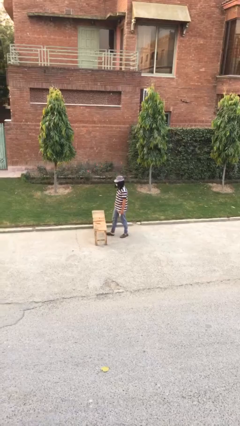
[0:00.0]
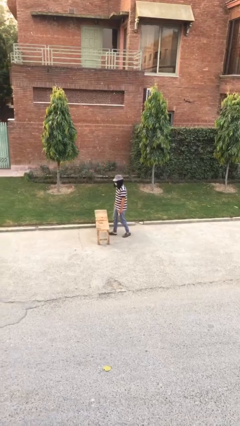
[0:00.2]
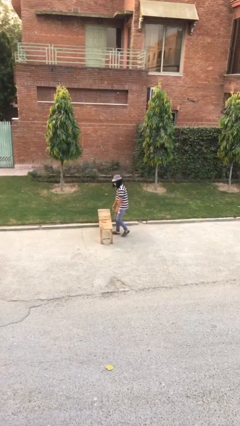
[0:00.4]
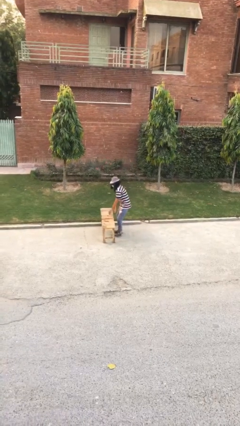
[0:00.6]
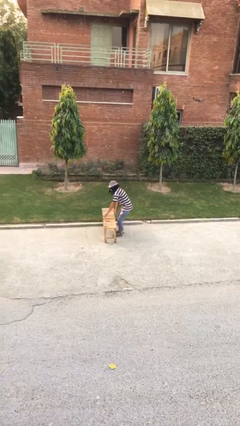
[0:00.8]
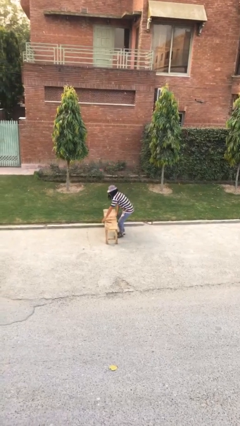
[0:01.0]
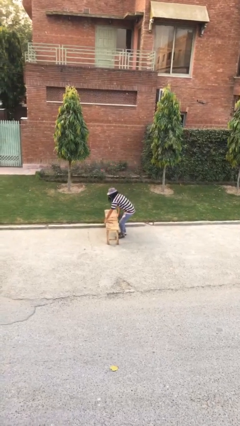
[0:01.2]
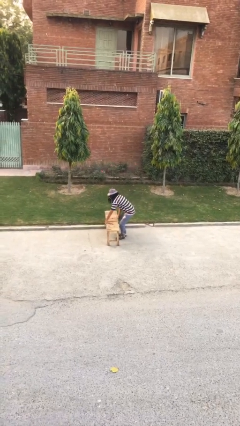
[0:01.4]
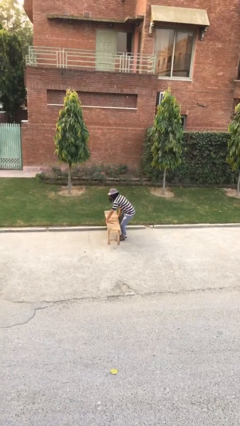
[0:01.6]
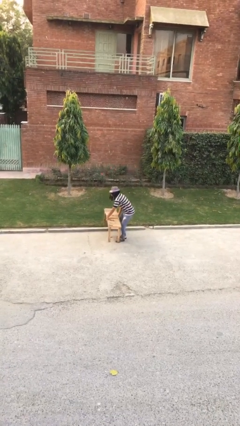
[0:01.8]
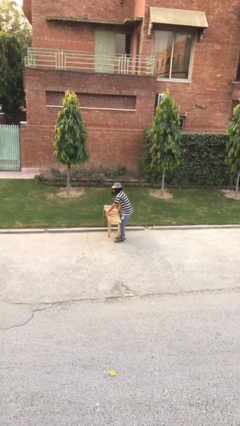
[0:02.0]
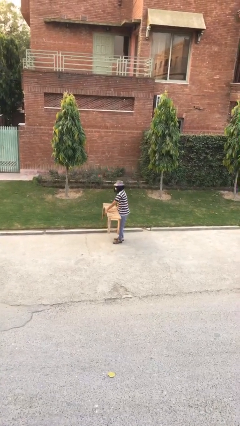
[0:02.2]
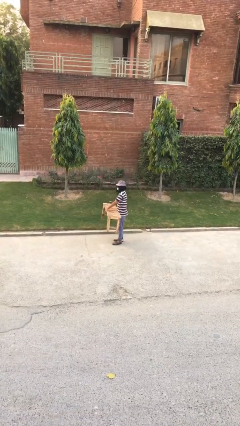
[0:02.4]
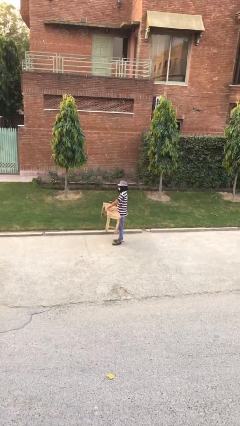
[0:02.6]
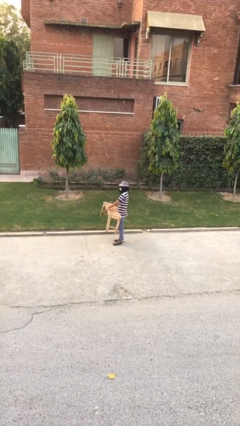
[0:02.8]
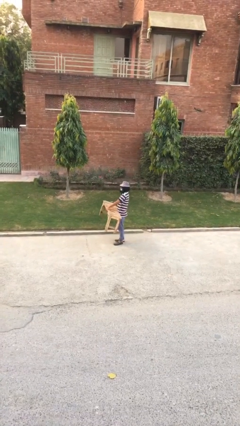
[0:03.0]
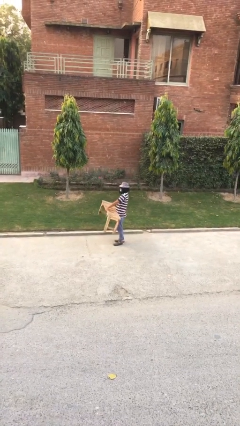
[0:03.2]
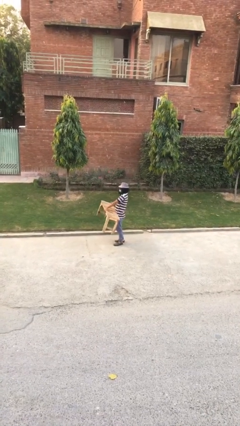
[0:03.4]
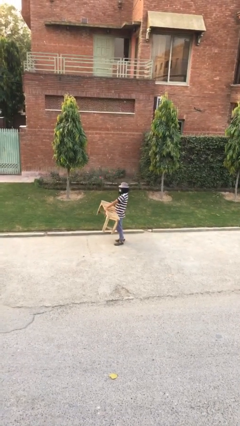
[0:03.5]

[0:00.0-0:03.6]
person picks up object from floor

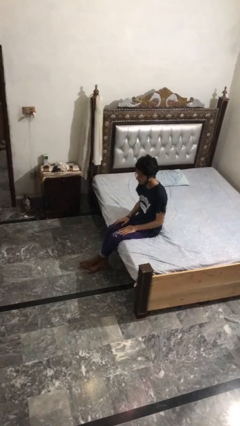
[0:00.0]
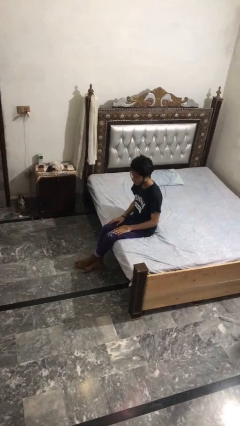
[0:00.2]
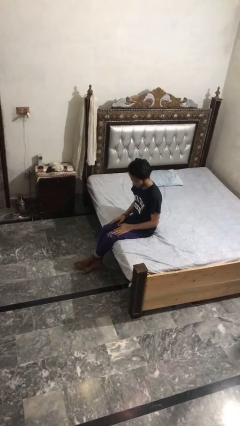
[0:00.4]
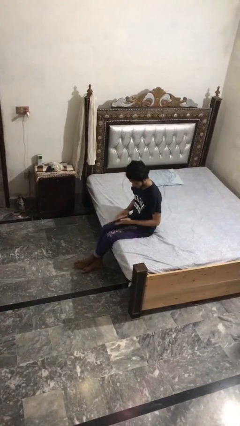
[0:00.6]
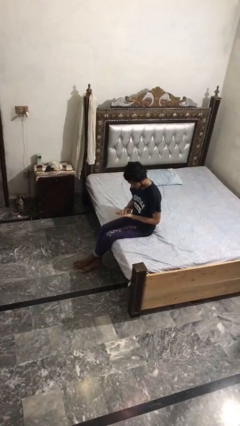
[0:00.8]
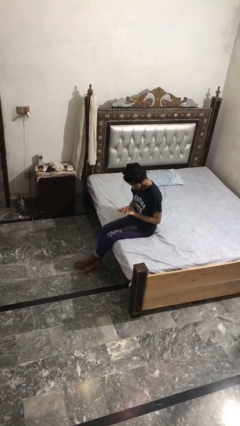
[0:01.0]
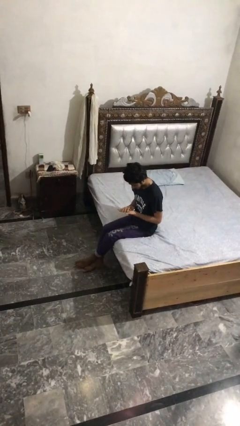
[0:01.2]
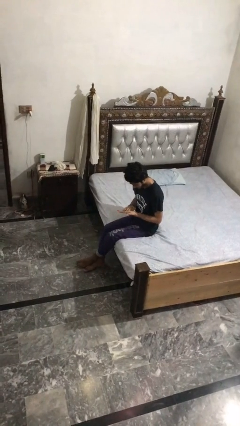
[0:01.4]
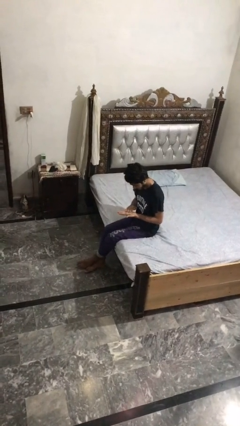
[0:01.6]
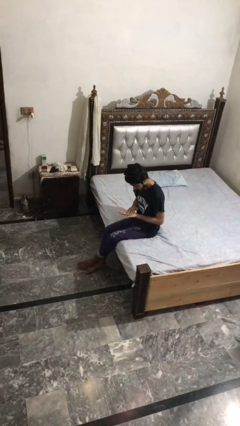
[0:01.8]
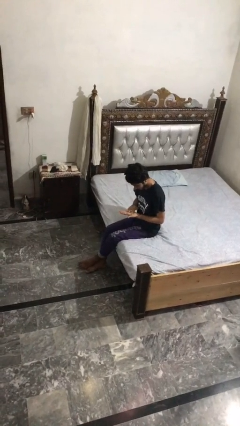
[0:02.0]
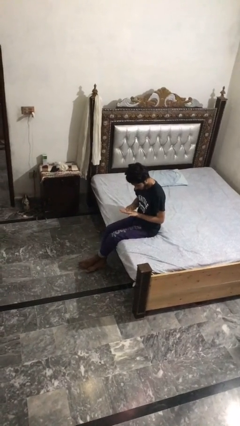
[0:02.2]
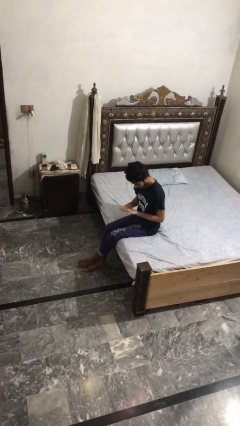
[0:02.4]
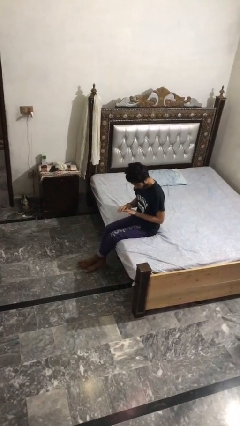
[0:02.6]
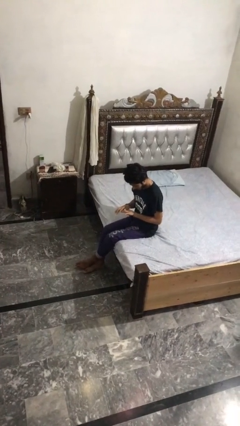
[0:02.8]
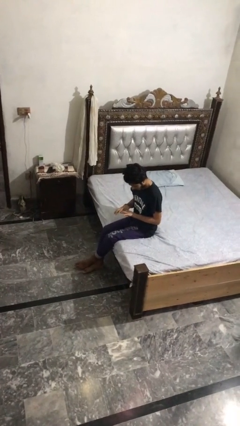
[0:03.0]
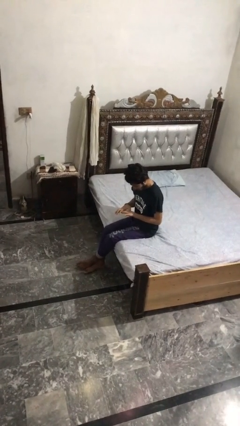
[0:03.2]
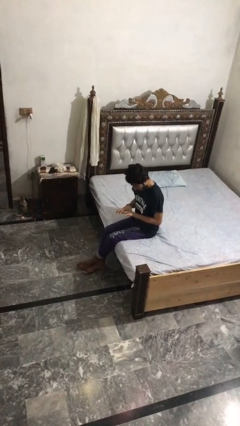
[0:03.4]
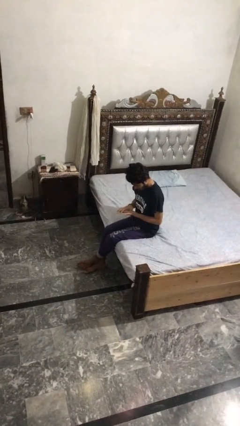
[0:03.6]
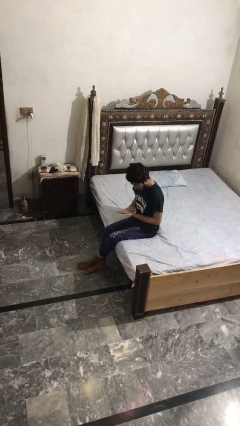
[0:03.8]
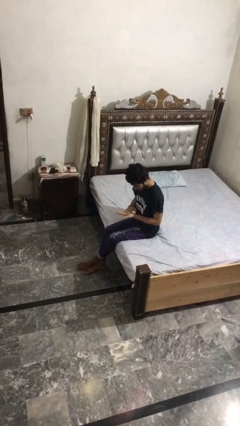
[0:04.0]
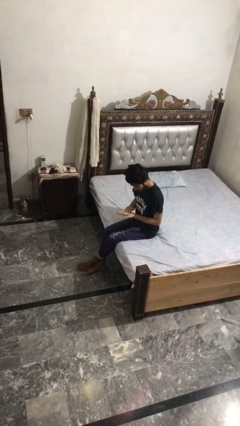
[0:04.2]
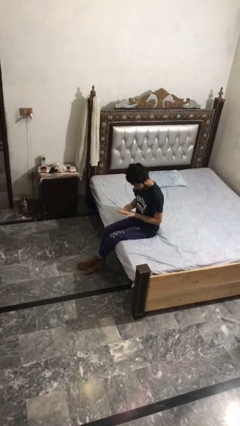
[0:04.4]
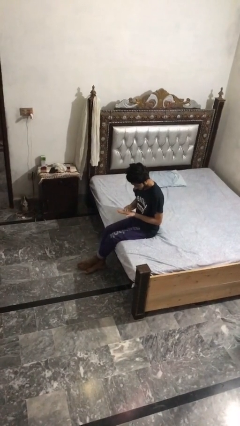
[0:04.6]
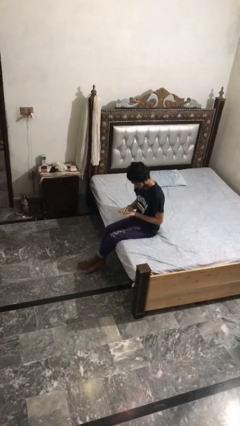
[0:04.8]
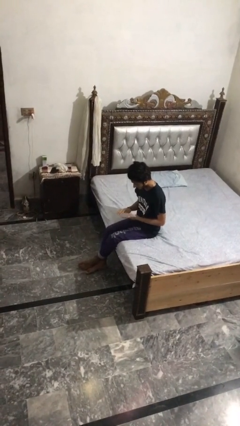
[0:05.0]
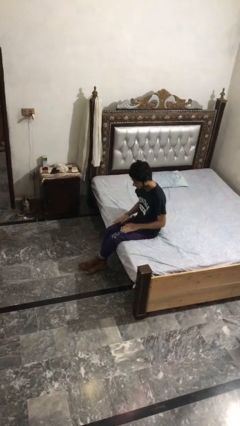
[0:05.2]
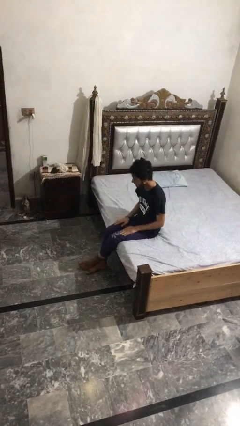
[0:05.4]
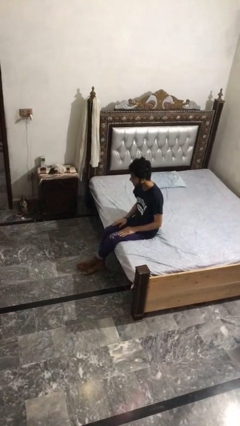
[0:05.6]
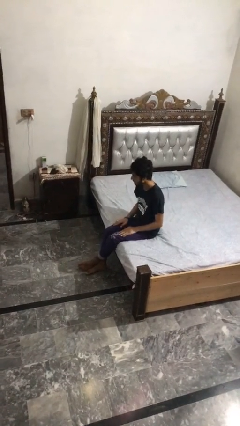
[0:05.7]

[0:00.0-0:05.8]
person looks at hands in lap

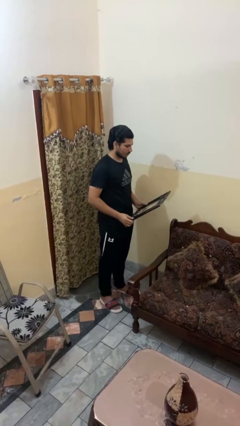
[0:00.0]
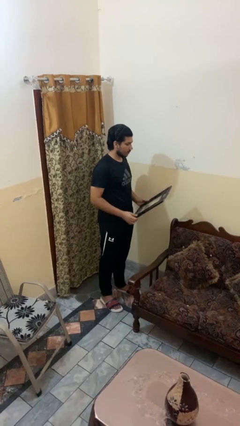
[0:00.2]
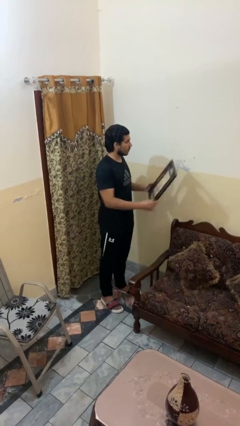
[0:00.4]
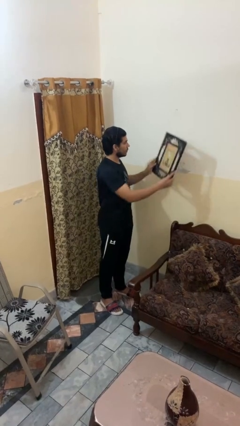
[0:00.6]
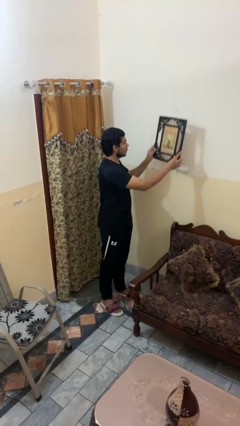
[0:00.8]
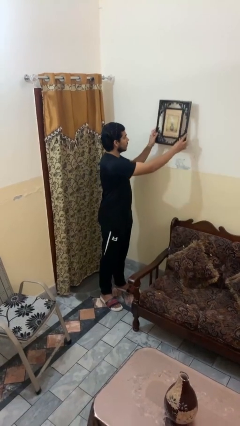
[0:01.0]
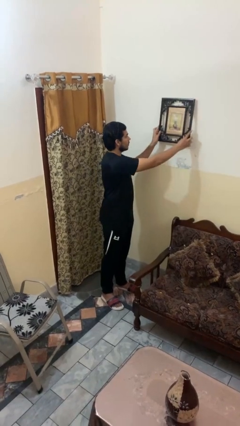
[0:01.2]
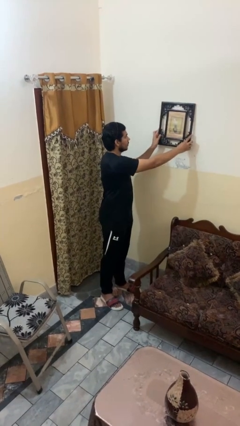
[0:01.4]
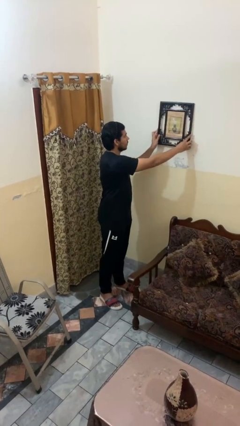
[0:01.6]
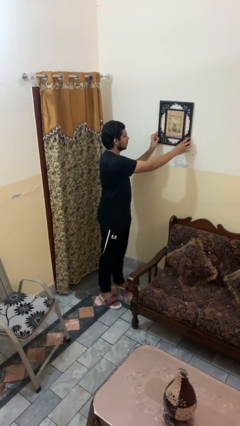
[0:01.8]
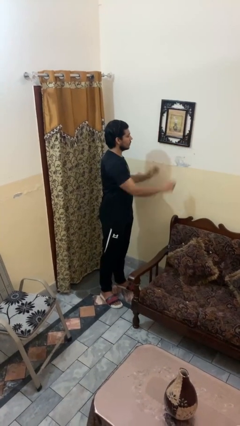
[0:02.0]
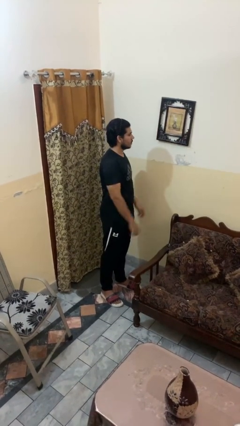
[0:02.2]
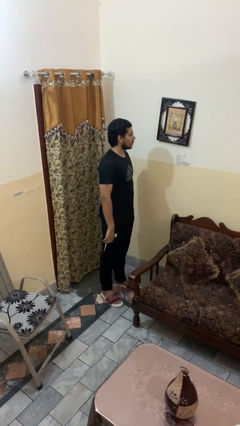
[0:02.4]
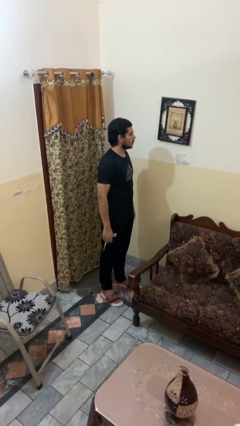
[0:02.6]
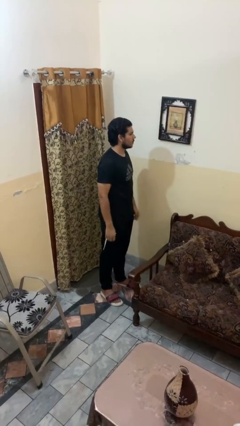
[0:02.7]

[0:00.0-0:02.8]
person puts up picture frame

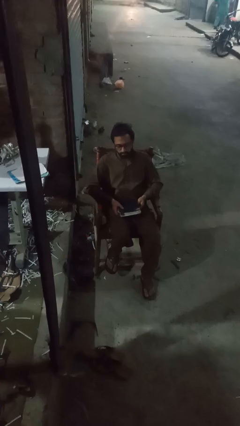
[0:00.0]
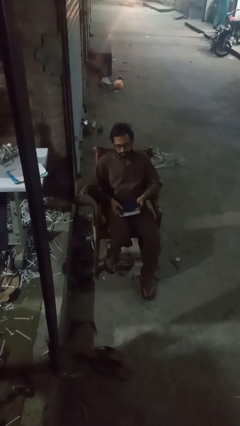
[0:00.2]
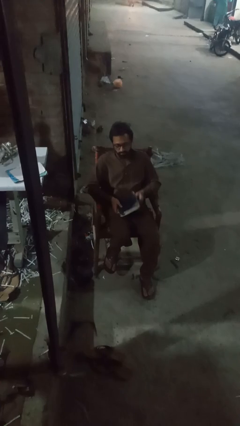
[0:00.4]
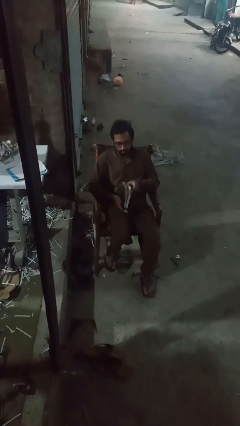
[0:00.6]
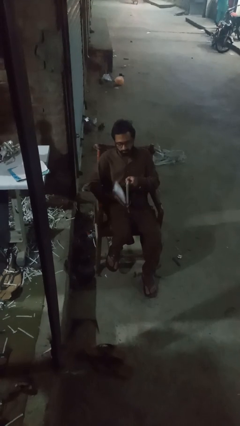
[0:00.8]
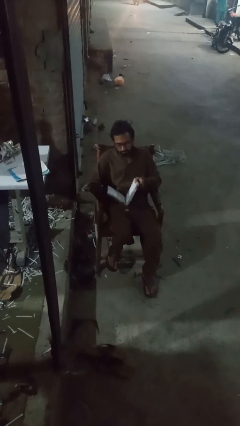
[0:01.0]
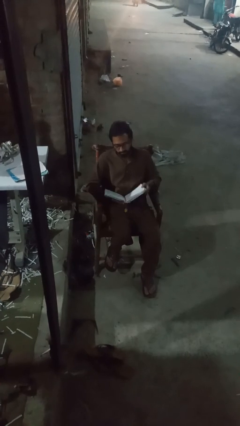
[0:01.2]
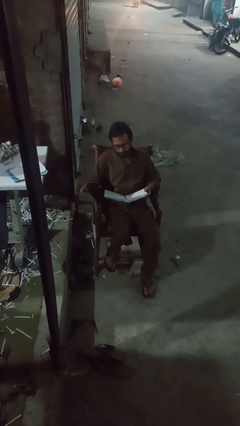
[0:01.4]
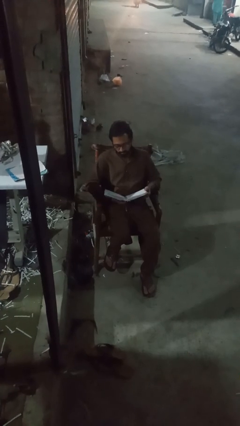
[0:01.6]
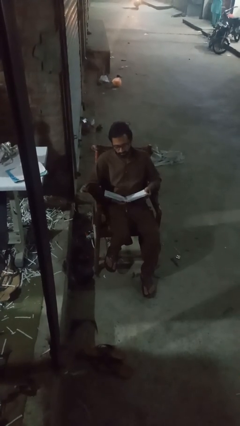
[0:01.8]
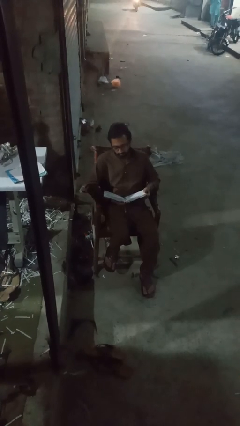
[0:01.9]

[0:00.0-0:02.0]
person reads book

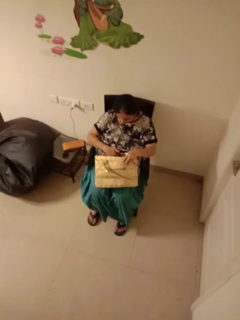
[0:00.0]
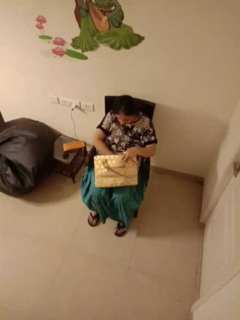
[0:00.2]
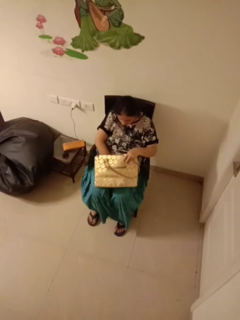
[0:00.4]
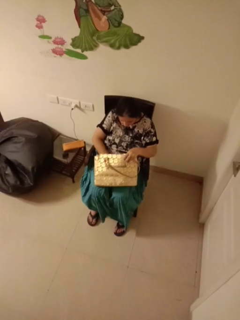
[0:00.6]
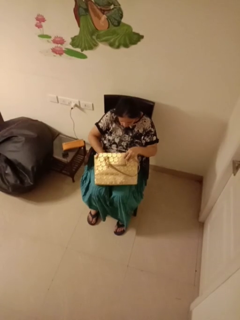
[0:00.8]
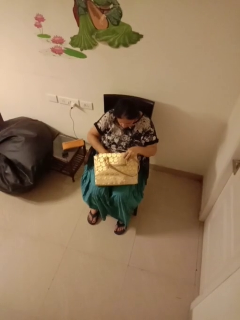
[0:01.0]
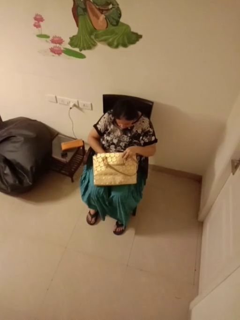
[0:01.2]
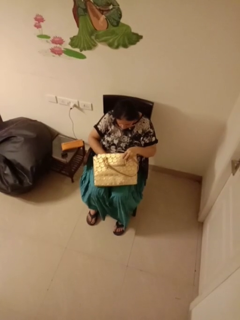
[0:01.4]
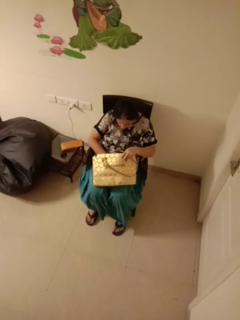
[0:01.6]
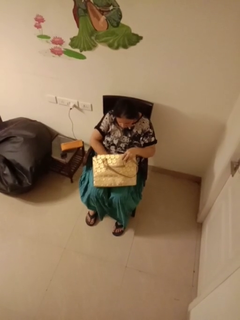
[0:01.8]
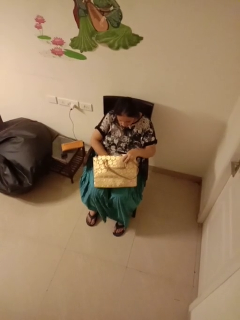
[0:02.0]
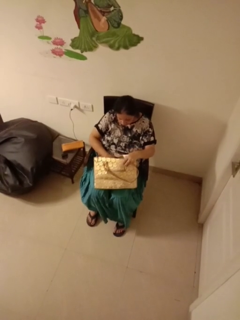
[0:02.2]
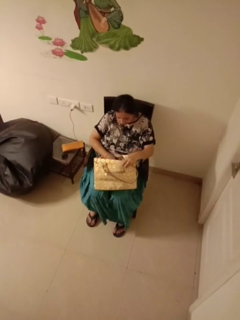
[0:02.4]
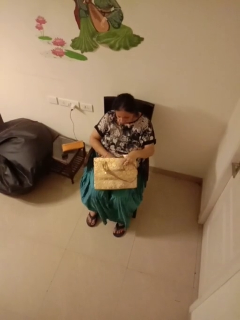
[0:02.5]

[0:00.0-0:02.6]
person searches in purse

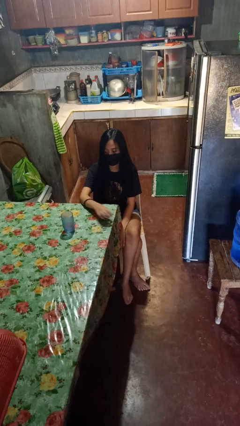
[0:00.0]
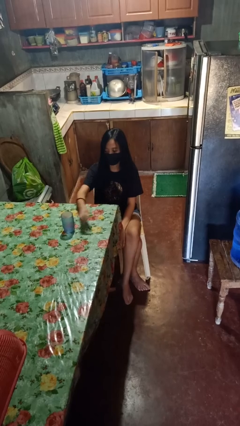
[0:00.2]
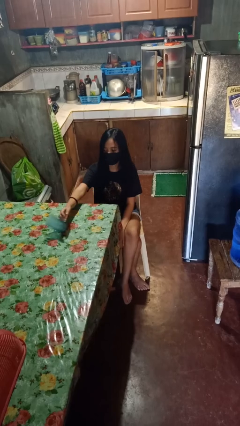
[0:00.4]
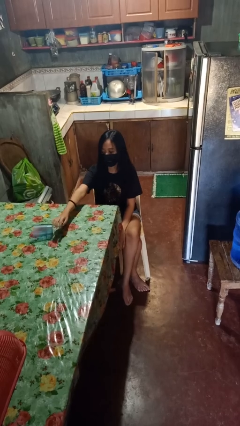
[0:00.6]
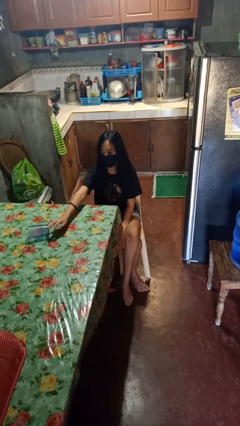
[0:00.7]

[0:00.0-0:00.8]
person knocks over glass

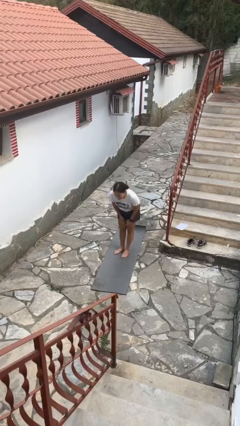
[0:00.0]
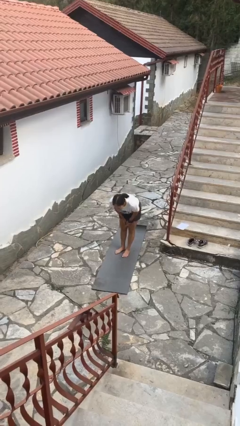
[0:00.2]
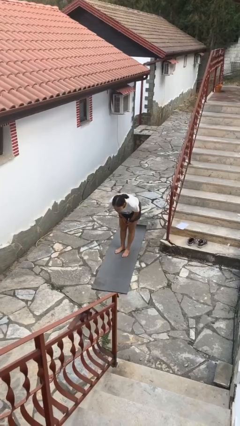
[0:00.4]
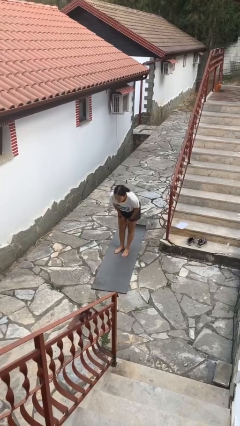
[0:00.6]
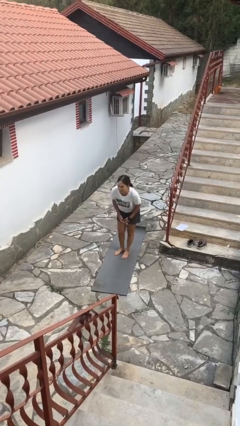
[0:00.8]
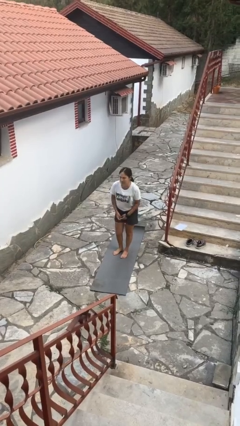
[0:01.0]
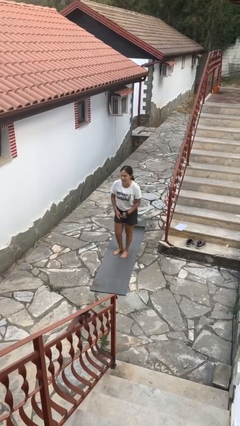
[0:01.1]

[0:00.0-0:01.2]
person bows
